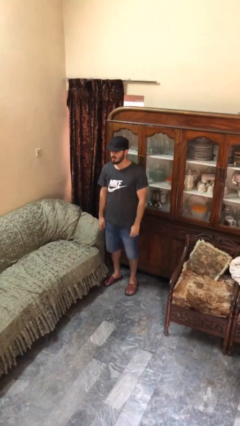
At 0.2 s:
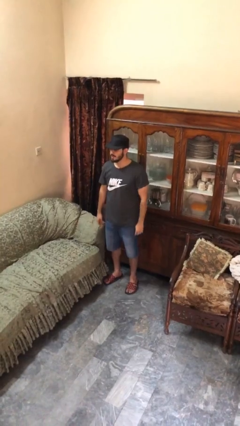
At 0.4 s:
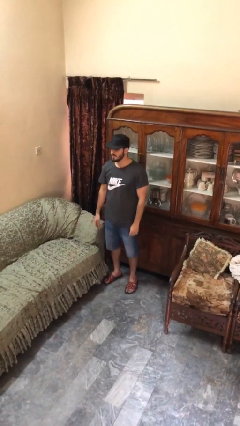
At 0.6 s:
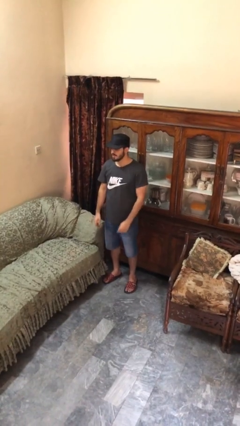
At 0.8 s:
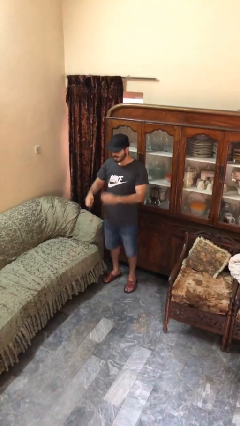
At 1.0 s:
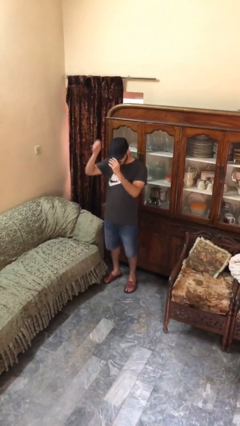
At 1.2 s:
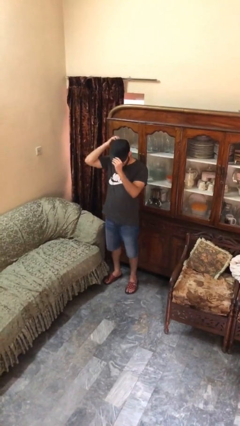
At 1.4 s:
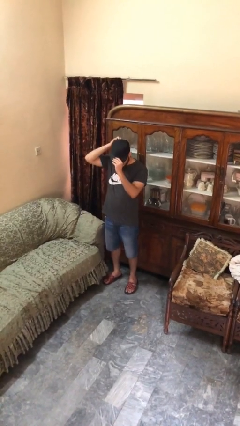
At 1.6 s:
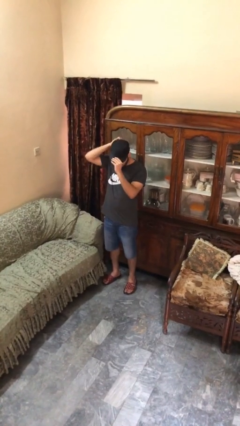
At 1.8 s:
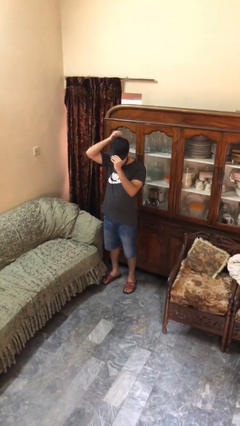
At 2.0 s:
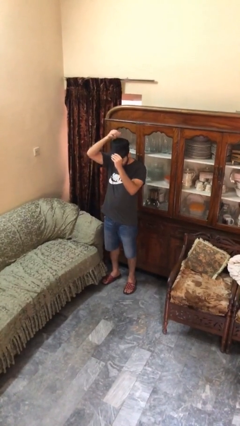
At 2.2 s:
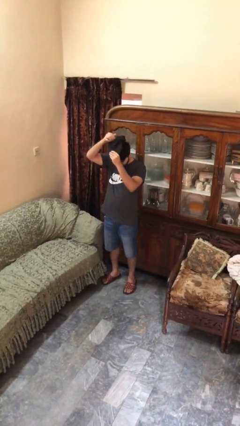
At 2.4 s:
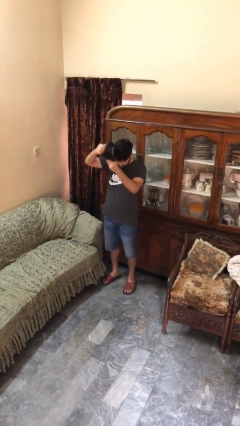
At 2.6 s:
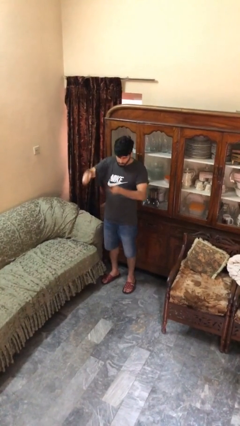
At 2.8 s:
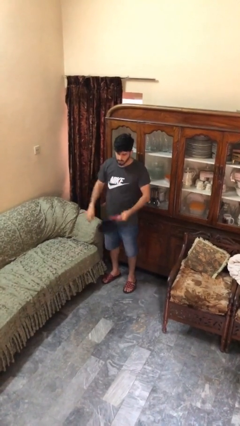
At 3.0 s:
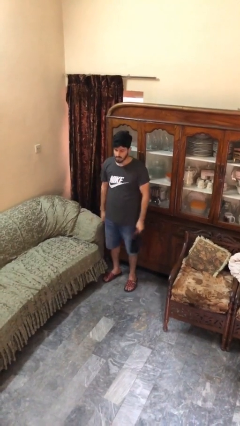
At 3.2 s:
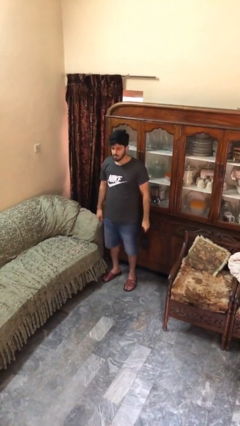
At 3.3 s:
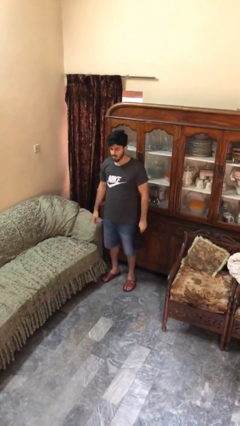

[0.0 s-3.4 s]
person takes off hat

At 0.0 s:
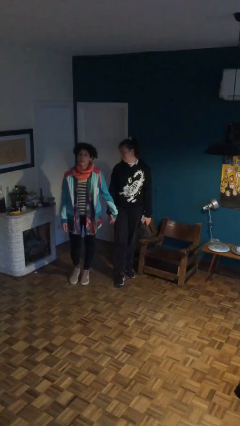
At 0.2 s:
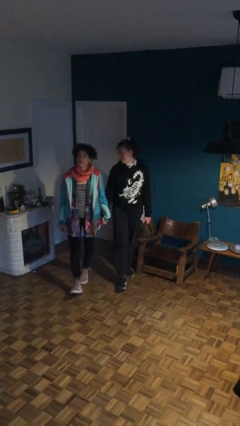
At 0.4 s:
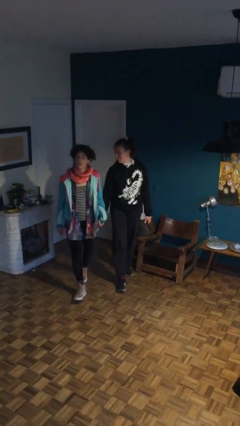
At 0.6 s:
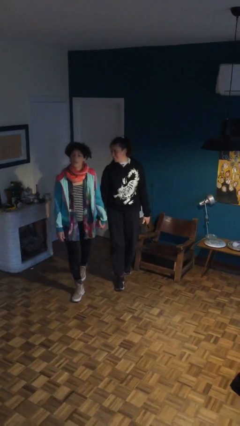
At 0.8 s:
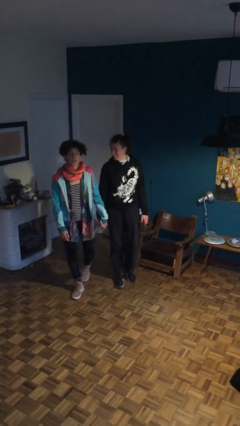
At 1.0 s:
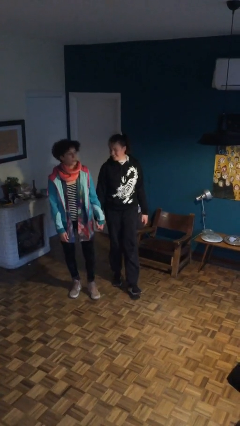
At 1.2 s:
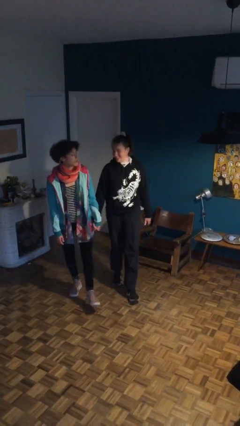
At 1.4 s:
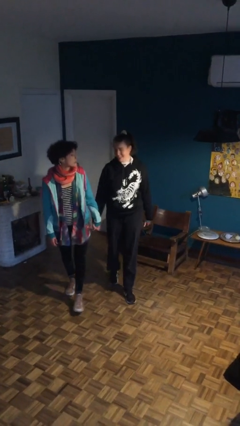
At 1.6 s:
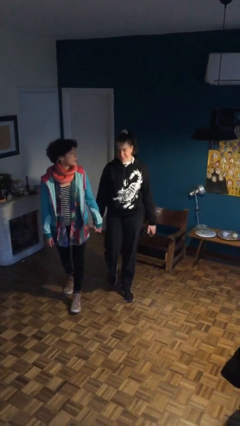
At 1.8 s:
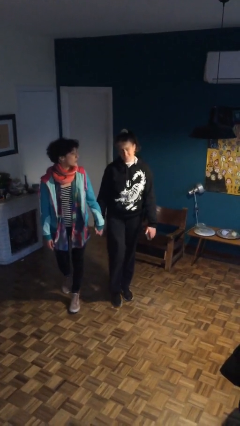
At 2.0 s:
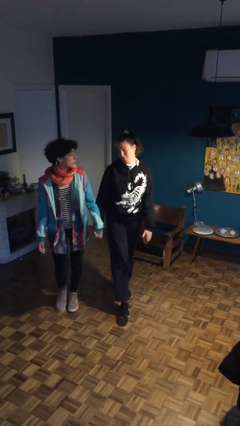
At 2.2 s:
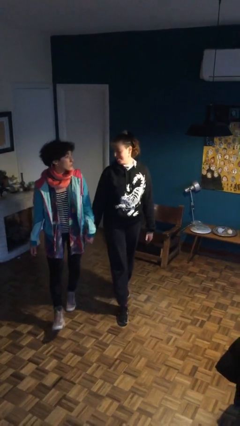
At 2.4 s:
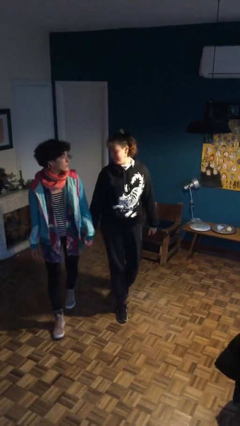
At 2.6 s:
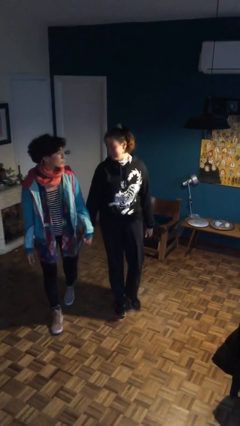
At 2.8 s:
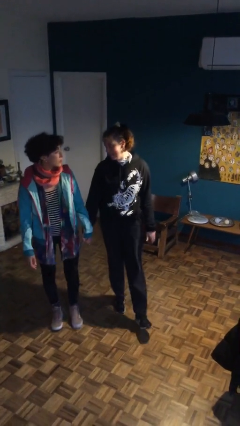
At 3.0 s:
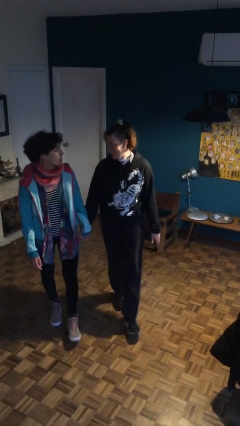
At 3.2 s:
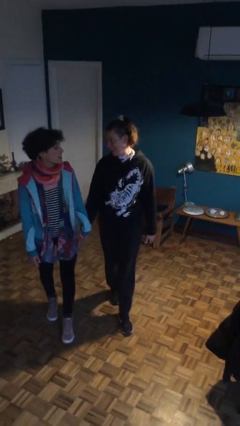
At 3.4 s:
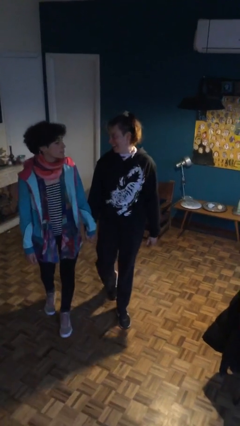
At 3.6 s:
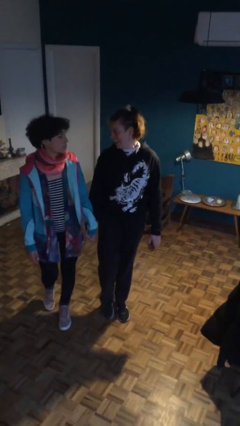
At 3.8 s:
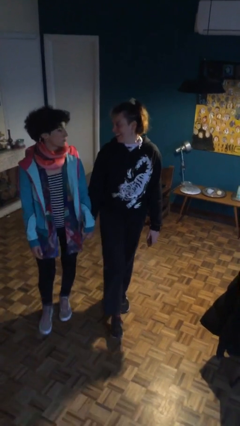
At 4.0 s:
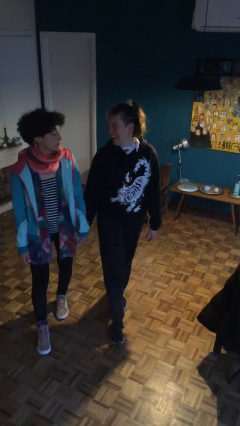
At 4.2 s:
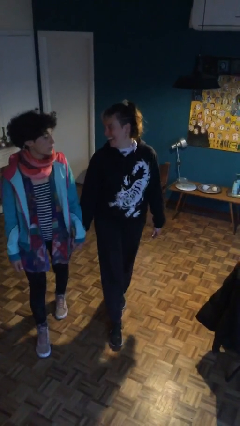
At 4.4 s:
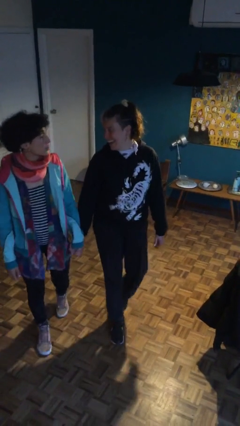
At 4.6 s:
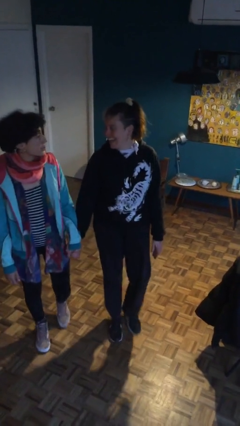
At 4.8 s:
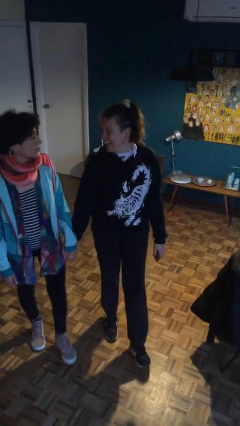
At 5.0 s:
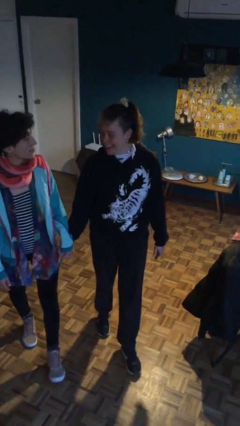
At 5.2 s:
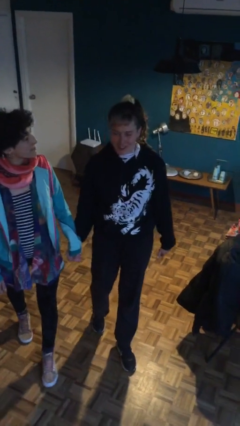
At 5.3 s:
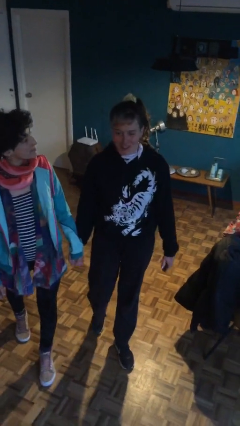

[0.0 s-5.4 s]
person holds hand

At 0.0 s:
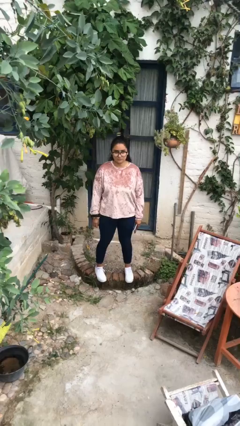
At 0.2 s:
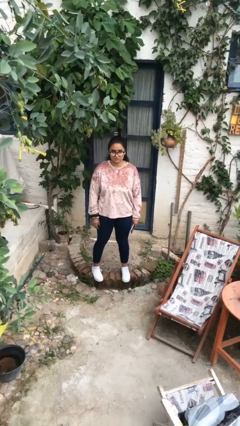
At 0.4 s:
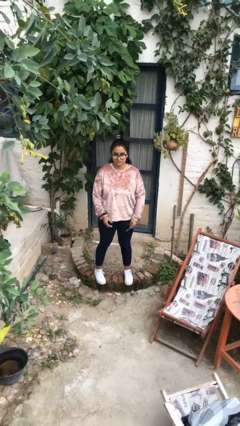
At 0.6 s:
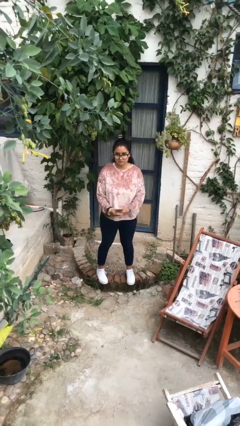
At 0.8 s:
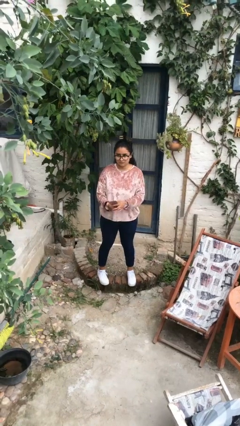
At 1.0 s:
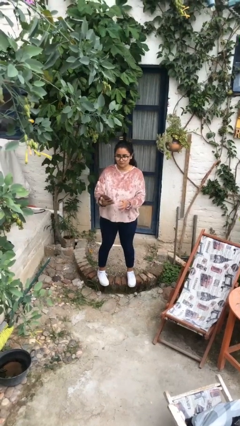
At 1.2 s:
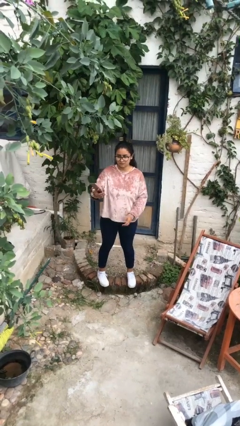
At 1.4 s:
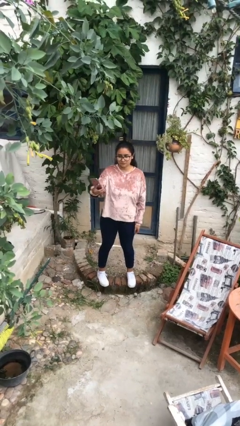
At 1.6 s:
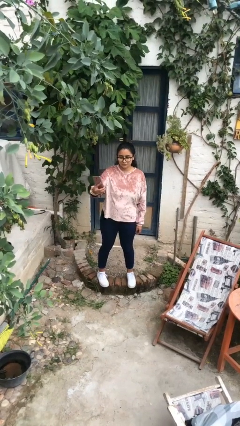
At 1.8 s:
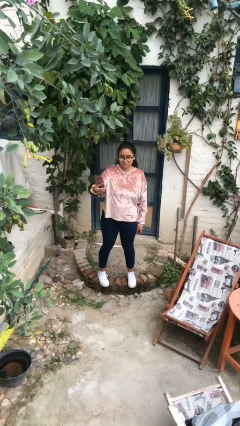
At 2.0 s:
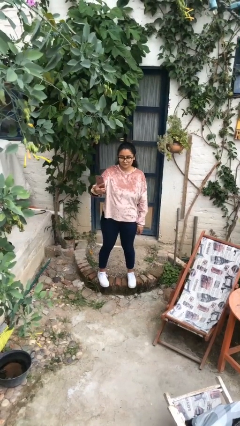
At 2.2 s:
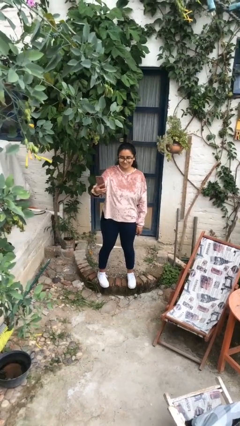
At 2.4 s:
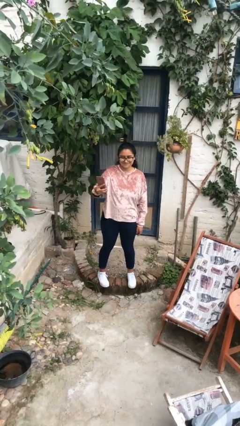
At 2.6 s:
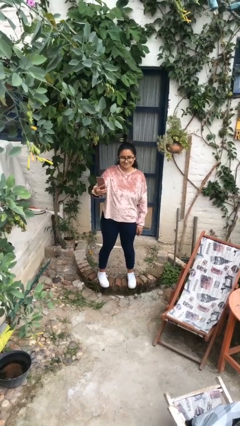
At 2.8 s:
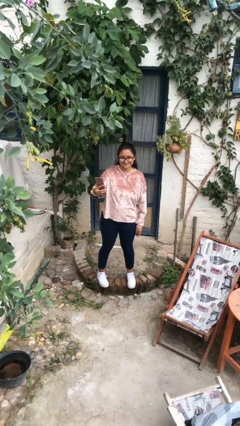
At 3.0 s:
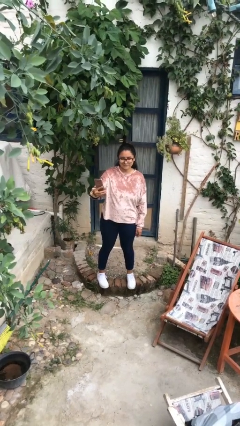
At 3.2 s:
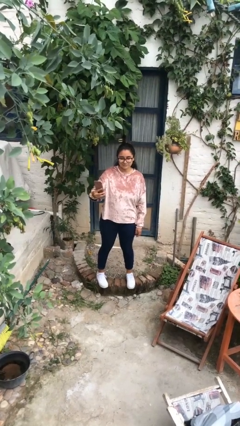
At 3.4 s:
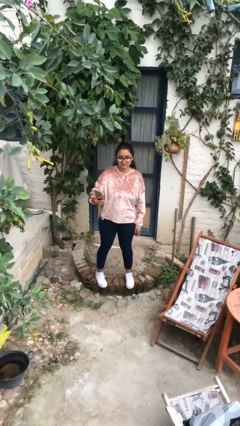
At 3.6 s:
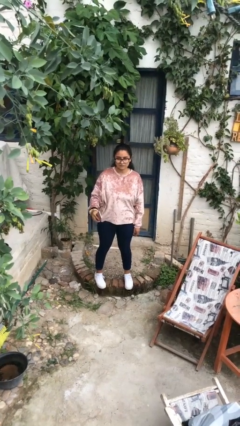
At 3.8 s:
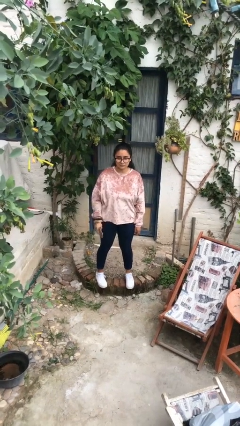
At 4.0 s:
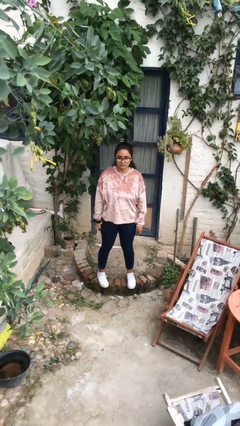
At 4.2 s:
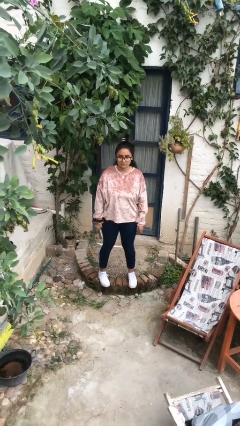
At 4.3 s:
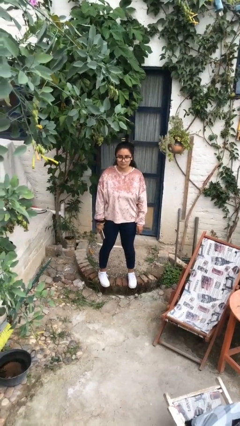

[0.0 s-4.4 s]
person takes selfie

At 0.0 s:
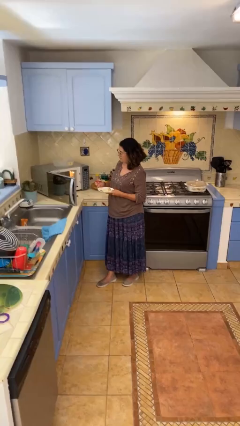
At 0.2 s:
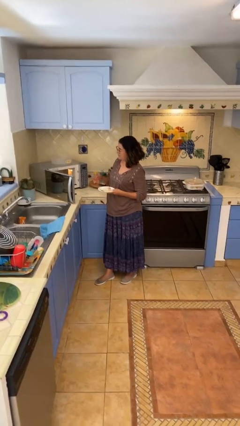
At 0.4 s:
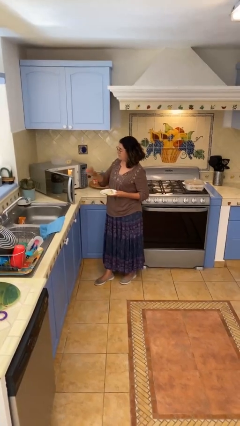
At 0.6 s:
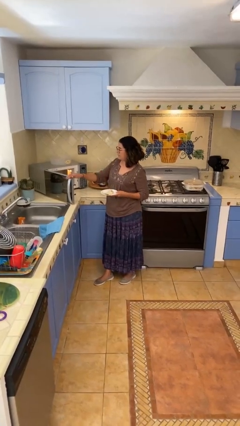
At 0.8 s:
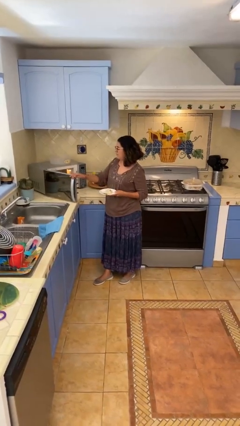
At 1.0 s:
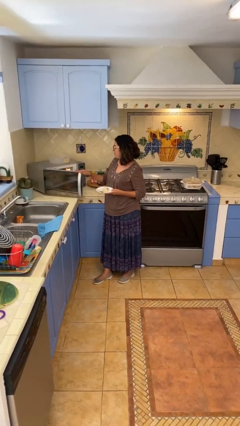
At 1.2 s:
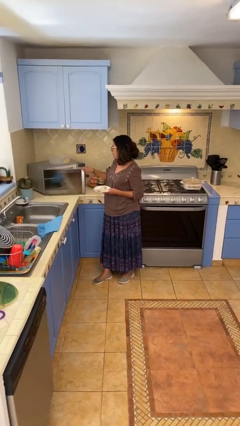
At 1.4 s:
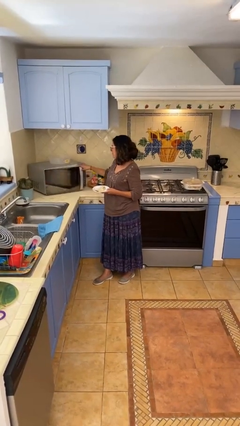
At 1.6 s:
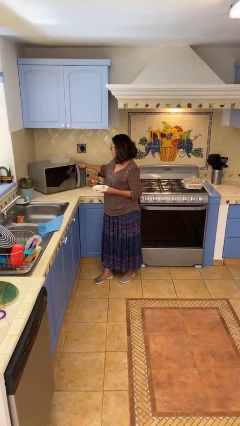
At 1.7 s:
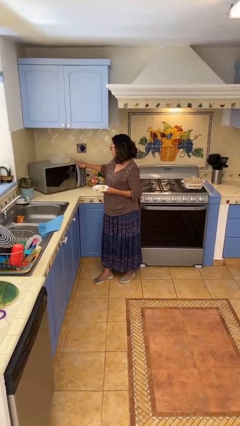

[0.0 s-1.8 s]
person closes microwave

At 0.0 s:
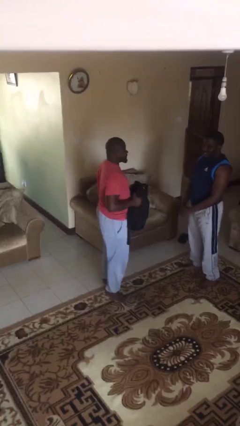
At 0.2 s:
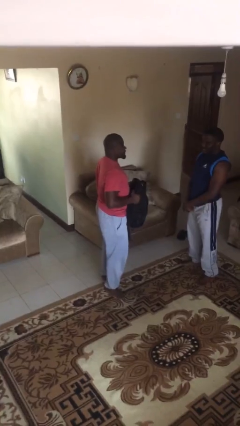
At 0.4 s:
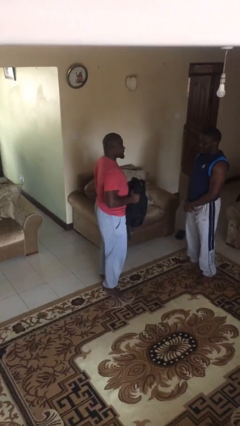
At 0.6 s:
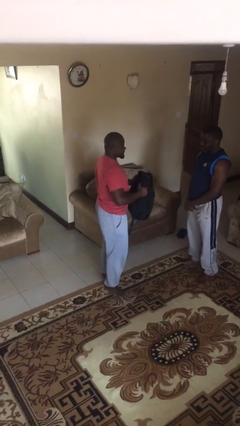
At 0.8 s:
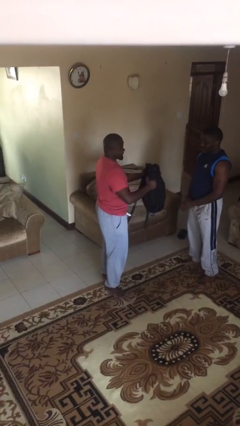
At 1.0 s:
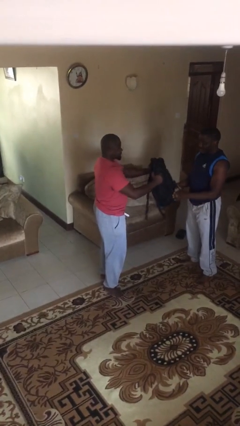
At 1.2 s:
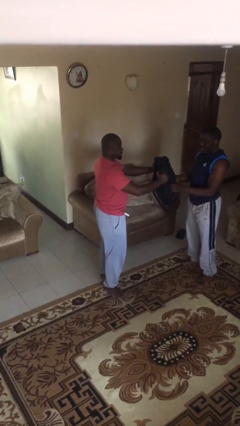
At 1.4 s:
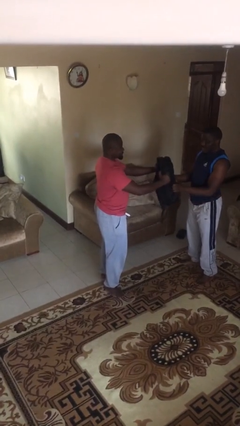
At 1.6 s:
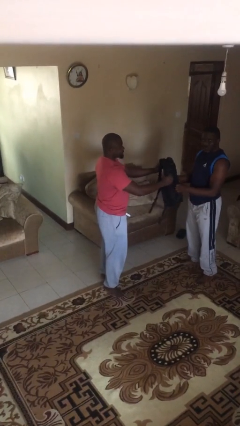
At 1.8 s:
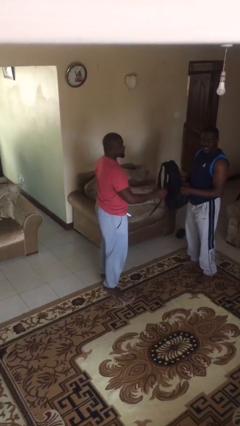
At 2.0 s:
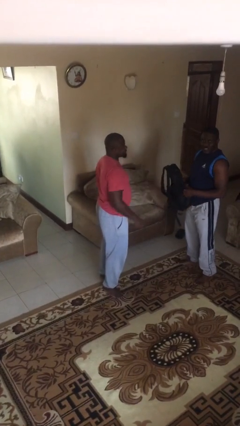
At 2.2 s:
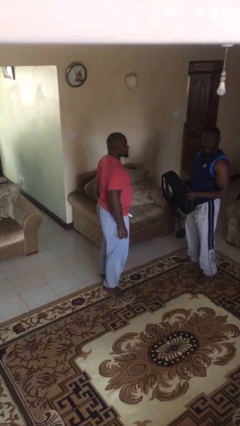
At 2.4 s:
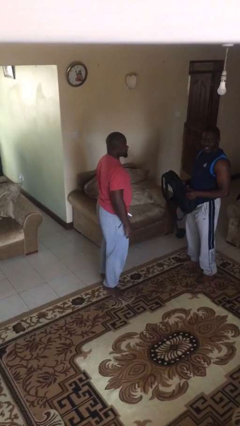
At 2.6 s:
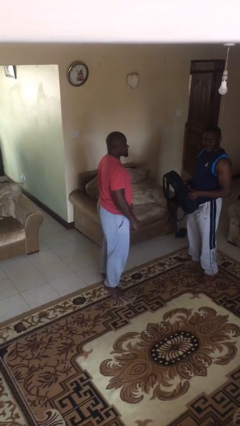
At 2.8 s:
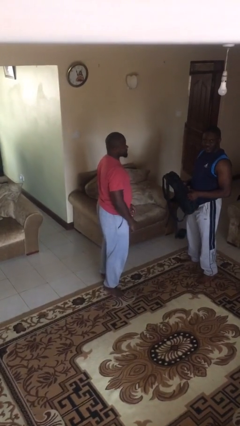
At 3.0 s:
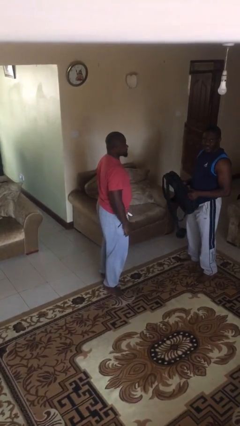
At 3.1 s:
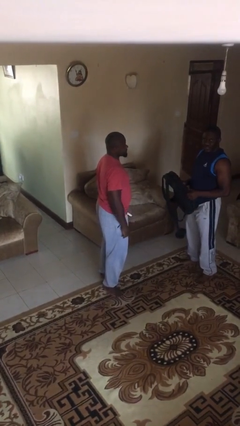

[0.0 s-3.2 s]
person transfers object to person
